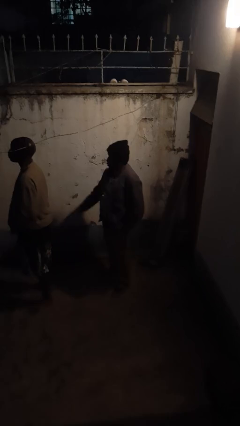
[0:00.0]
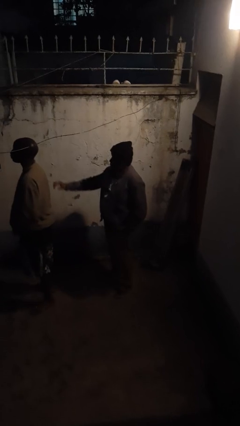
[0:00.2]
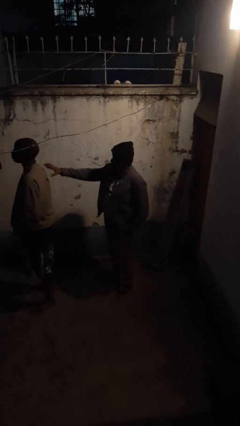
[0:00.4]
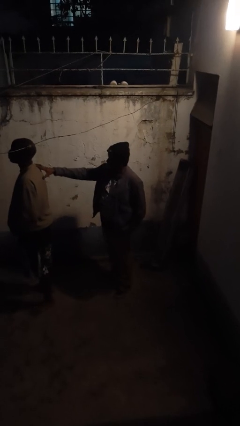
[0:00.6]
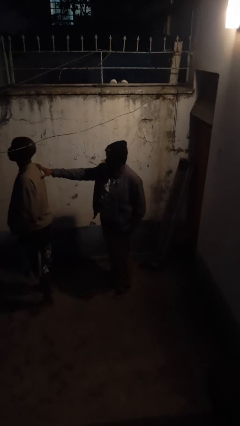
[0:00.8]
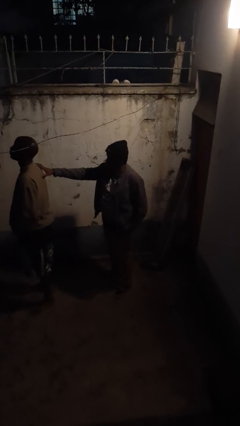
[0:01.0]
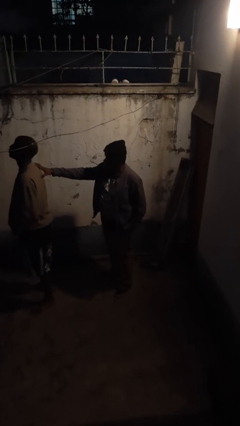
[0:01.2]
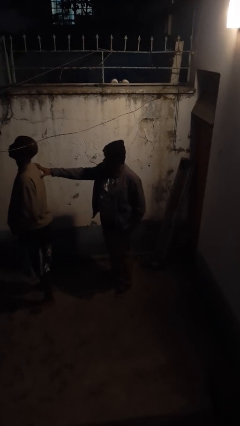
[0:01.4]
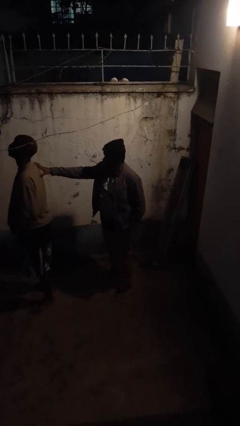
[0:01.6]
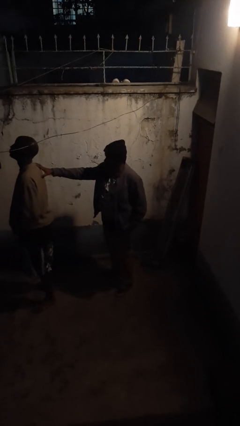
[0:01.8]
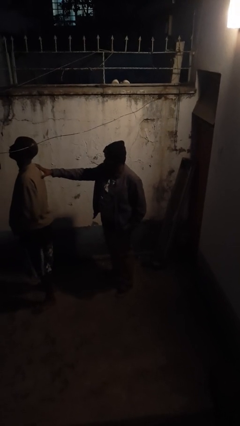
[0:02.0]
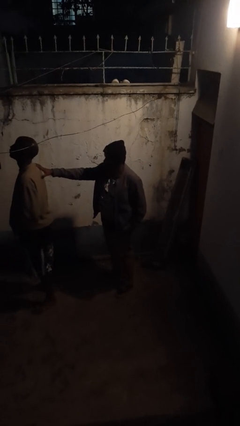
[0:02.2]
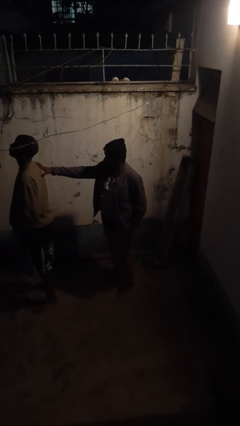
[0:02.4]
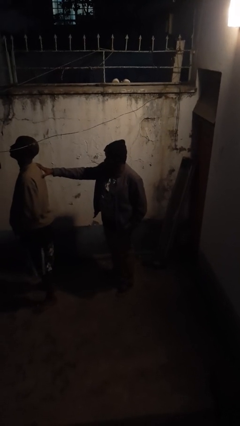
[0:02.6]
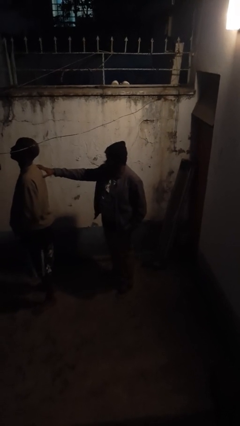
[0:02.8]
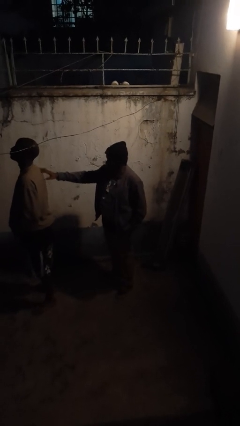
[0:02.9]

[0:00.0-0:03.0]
person touches back of person

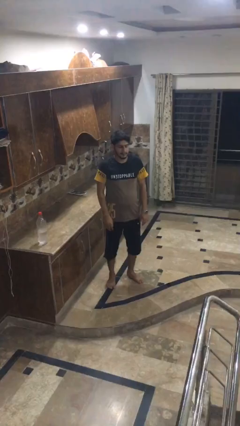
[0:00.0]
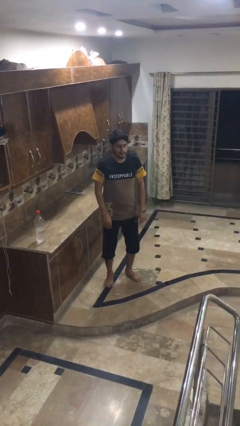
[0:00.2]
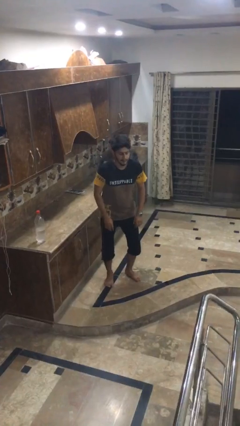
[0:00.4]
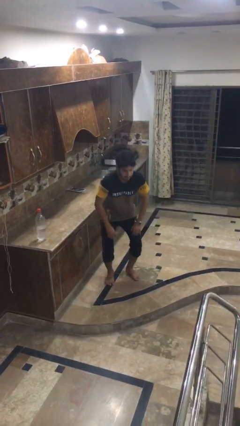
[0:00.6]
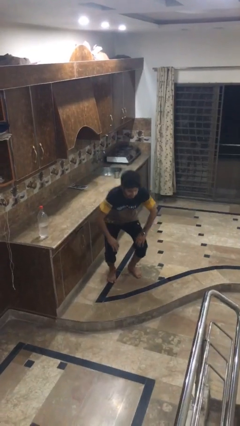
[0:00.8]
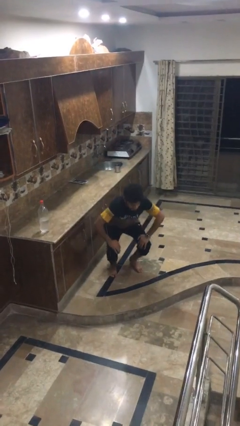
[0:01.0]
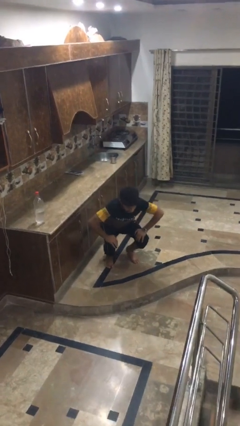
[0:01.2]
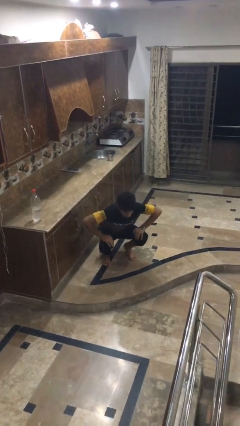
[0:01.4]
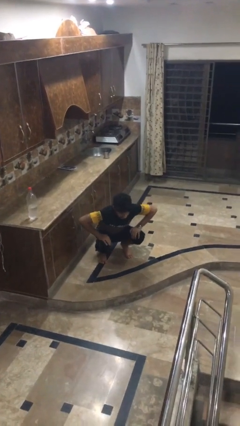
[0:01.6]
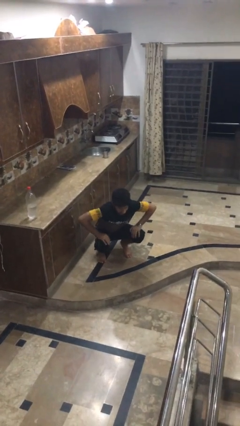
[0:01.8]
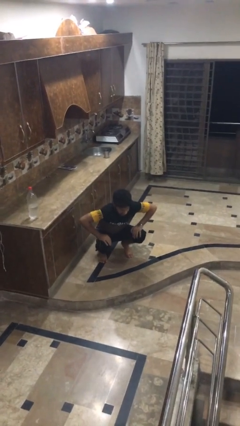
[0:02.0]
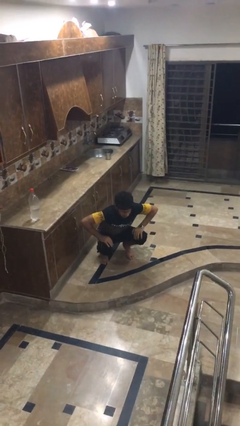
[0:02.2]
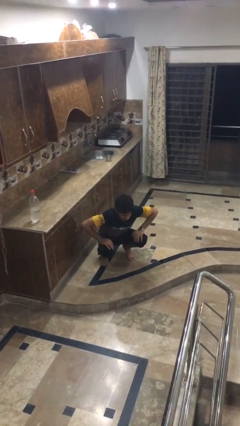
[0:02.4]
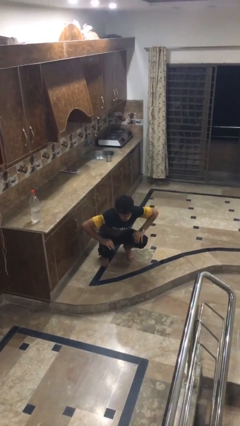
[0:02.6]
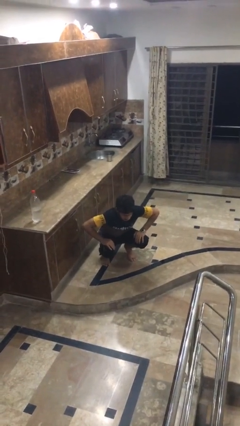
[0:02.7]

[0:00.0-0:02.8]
person squats

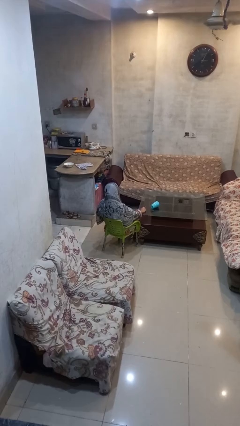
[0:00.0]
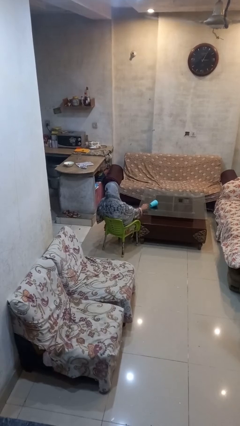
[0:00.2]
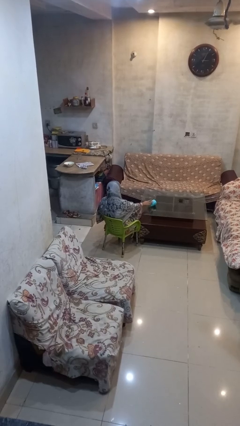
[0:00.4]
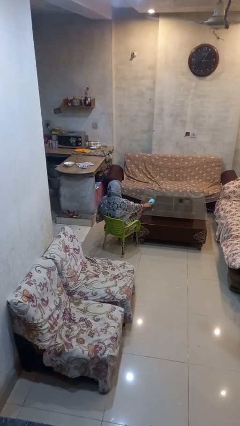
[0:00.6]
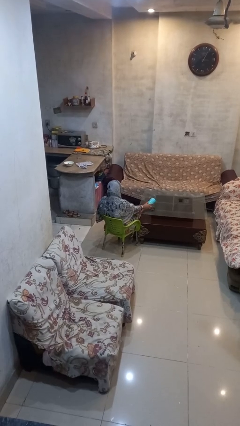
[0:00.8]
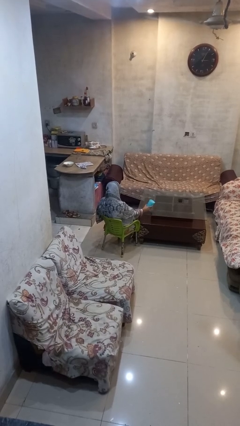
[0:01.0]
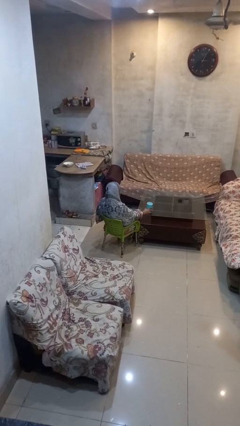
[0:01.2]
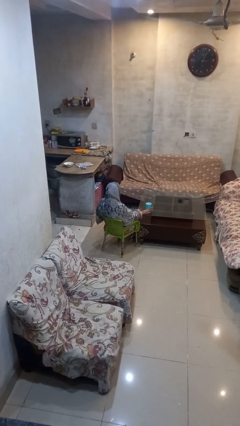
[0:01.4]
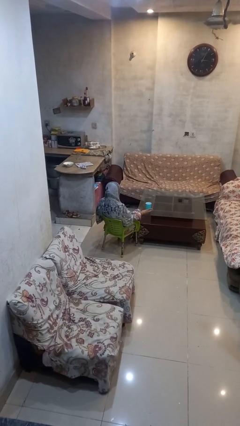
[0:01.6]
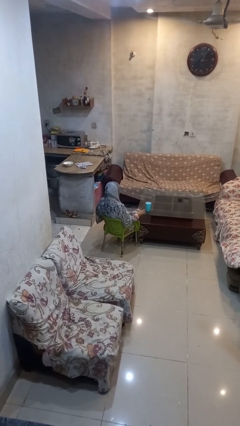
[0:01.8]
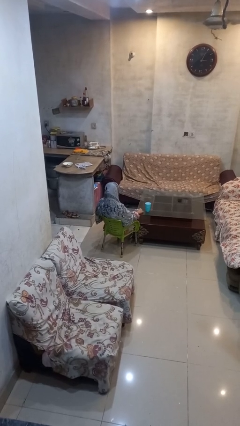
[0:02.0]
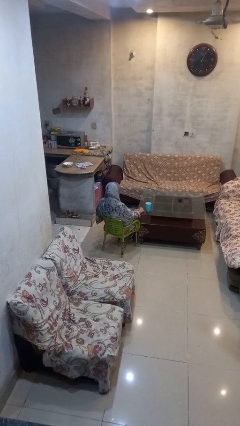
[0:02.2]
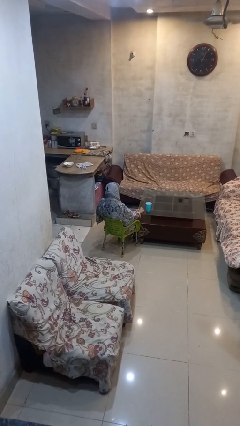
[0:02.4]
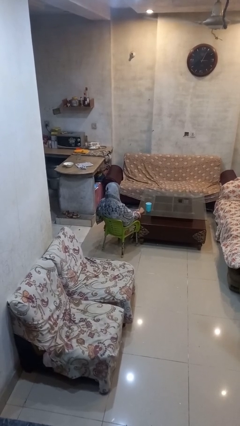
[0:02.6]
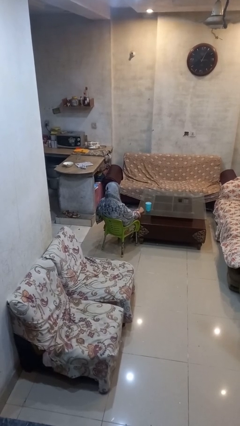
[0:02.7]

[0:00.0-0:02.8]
person sets upright glass

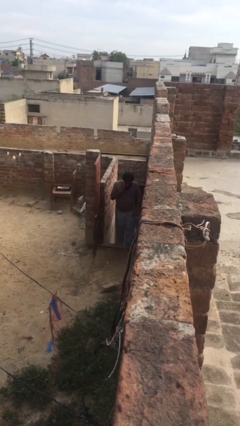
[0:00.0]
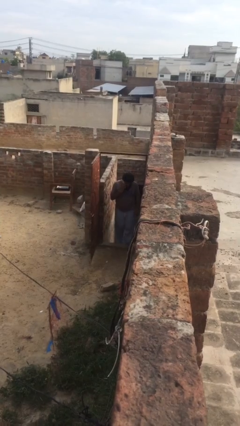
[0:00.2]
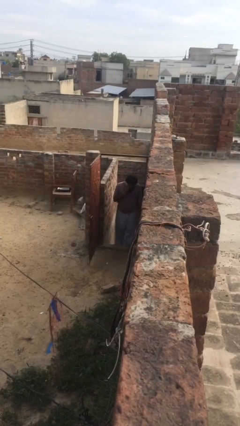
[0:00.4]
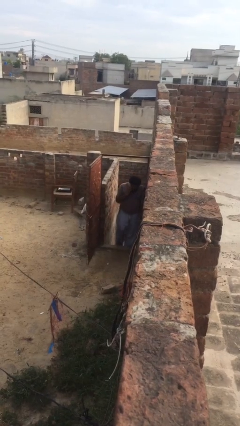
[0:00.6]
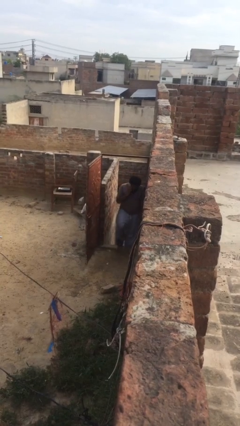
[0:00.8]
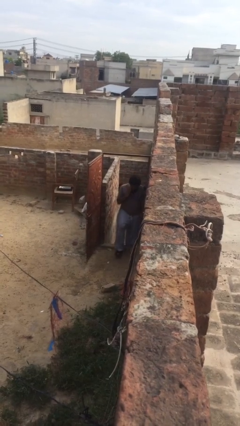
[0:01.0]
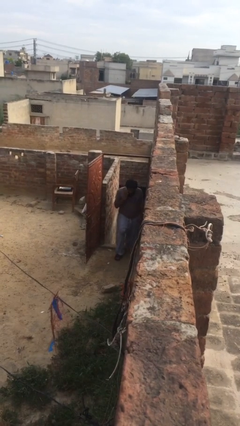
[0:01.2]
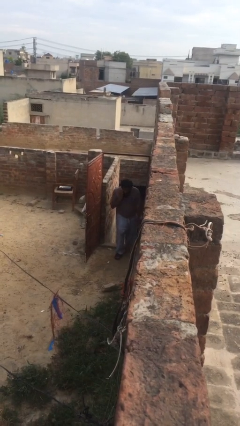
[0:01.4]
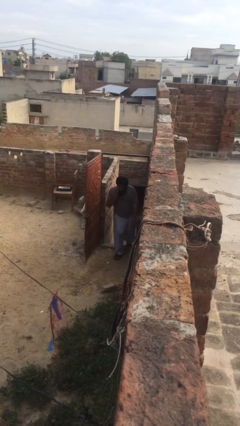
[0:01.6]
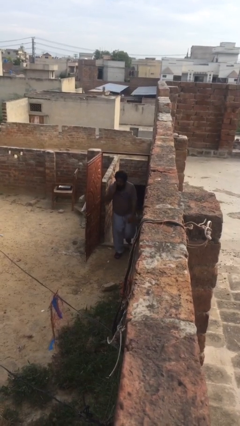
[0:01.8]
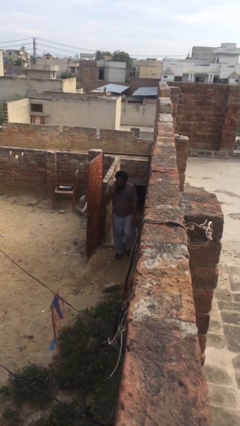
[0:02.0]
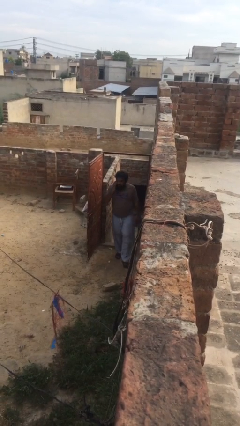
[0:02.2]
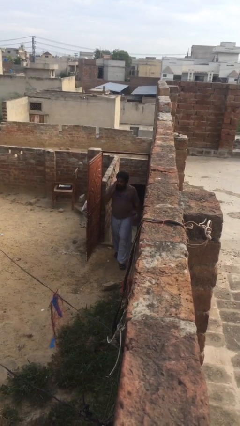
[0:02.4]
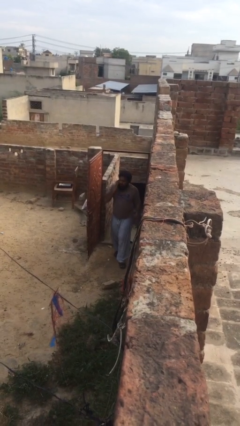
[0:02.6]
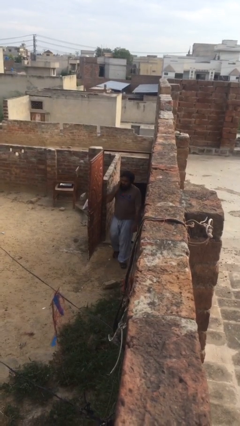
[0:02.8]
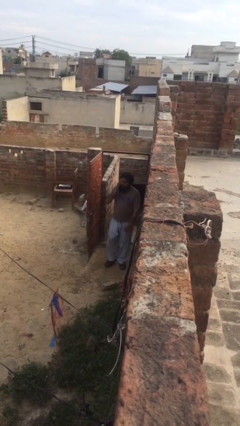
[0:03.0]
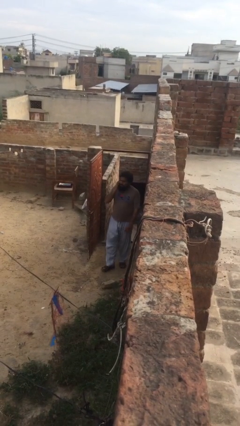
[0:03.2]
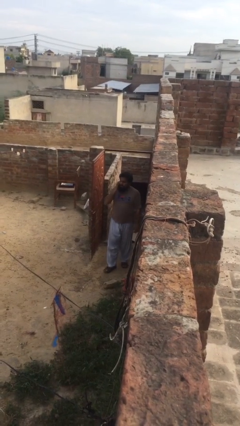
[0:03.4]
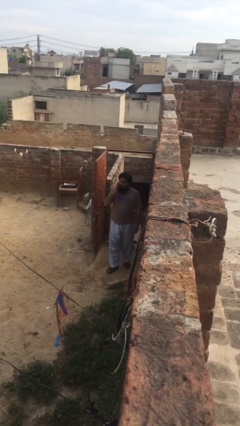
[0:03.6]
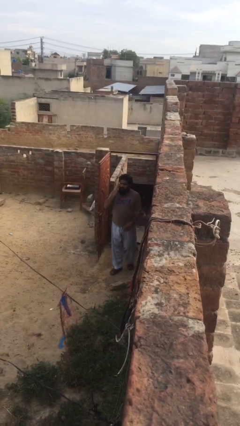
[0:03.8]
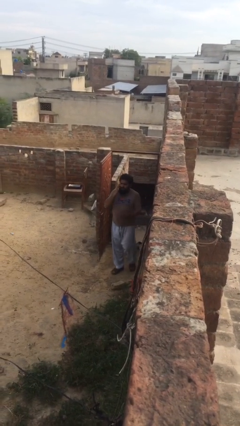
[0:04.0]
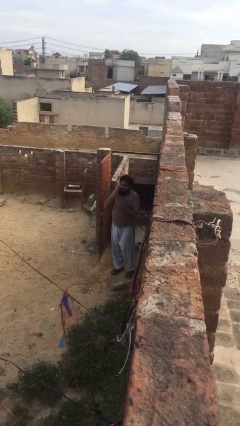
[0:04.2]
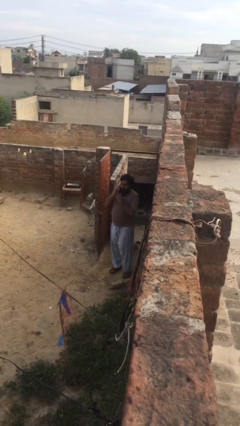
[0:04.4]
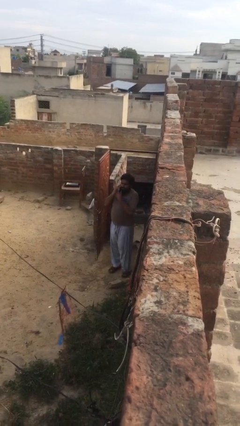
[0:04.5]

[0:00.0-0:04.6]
person enters scene through structure

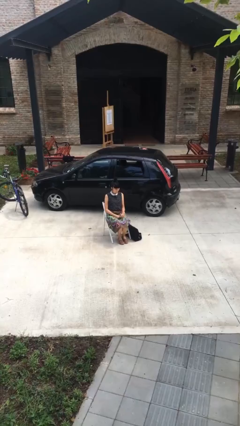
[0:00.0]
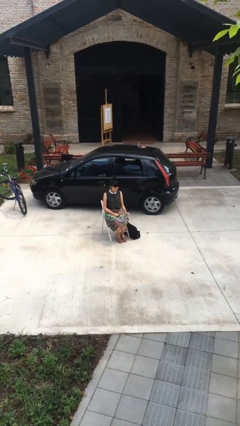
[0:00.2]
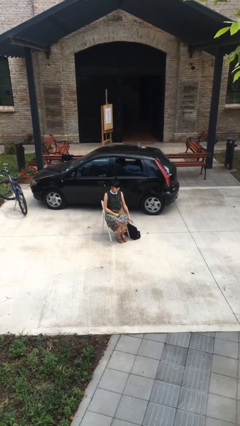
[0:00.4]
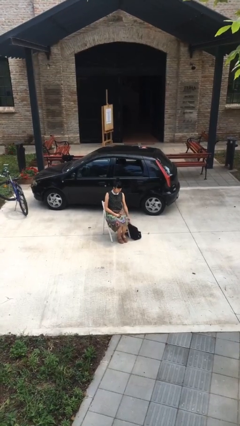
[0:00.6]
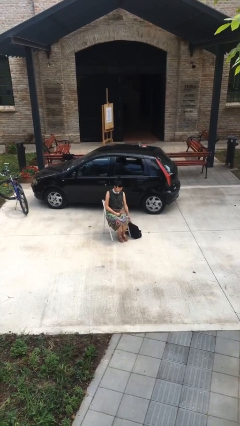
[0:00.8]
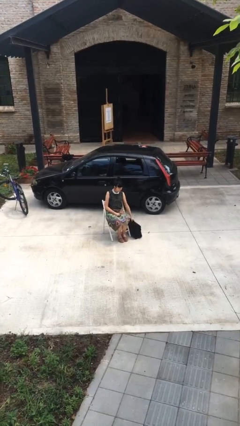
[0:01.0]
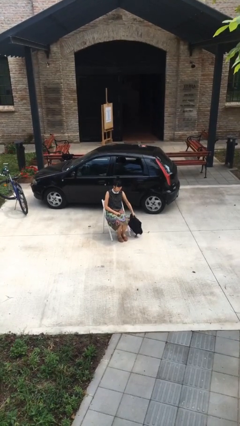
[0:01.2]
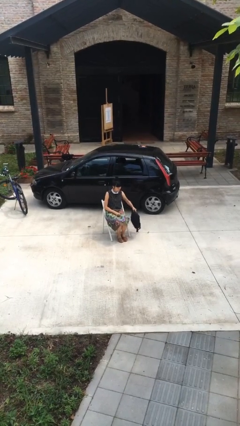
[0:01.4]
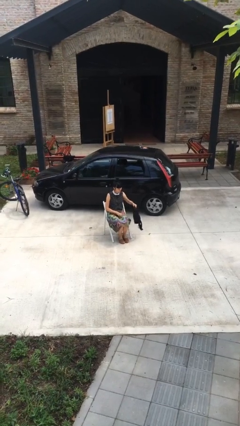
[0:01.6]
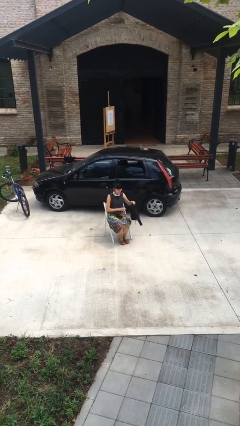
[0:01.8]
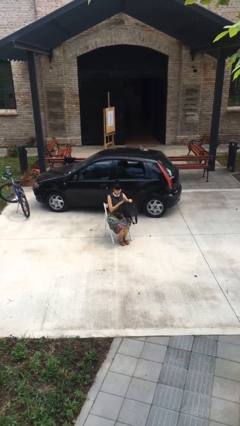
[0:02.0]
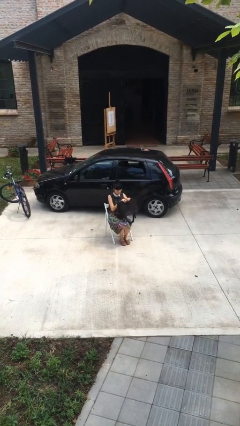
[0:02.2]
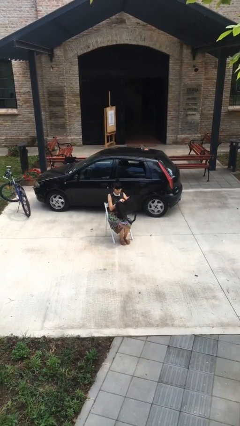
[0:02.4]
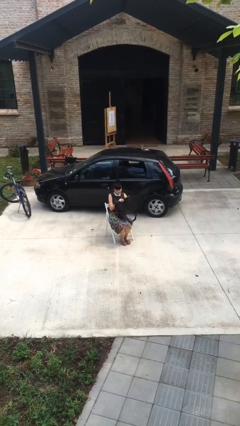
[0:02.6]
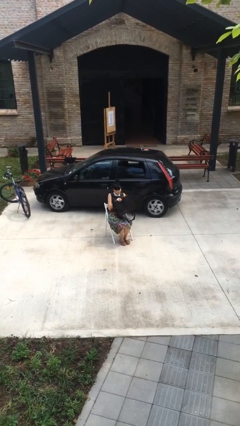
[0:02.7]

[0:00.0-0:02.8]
person picks up object from floor

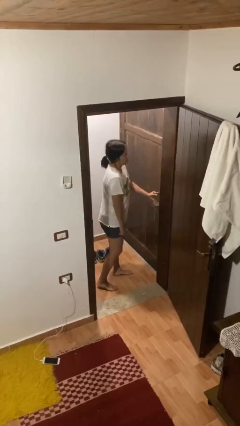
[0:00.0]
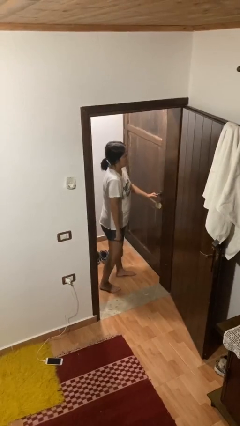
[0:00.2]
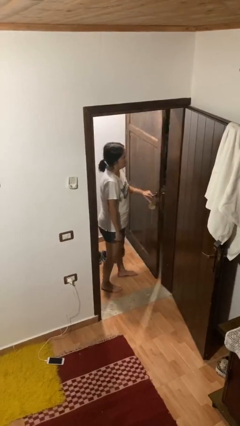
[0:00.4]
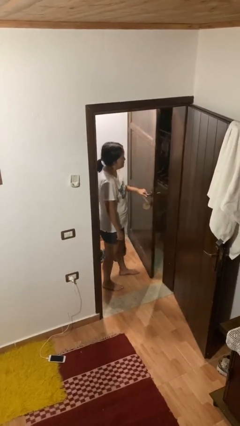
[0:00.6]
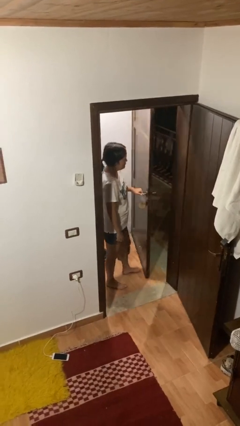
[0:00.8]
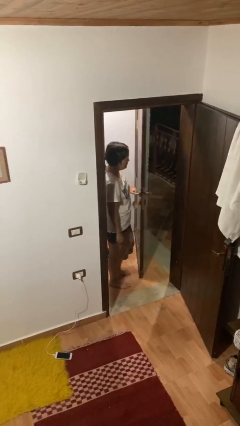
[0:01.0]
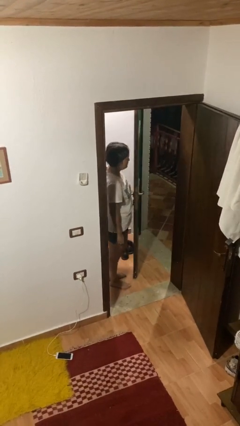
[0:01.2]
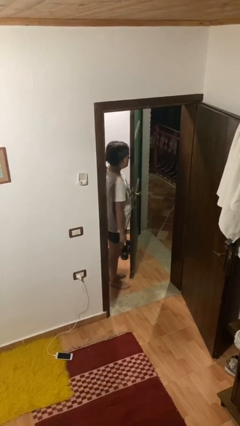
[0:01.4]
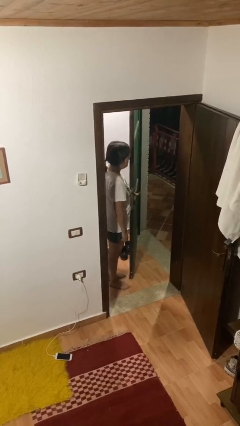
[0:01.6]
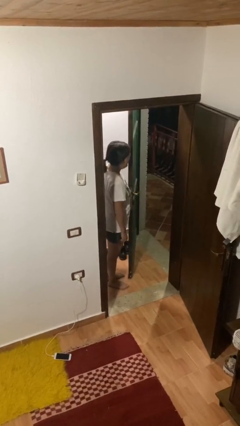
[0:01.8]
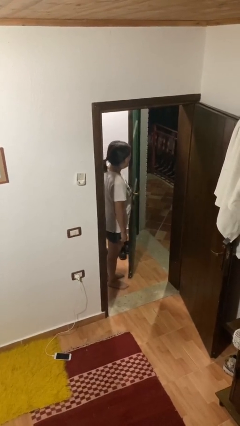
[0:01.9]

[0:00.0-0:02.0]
person opens facility door
